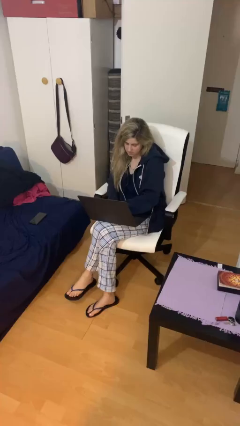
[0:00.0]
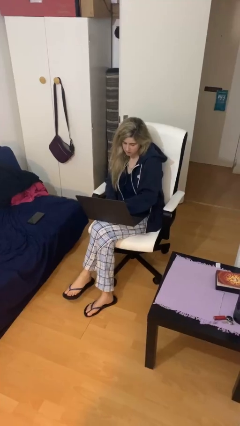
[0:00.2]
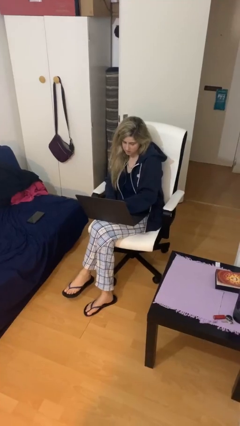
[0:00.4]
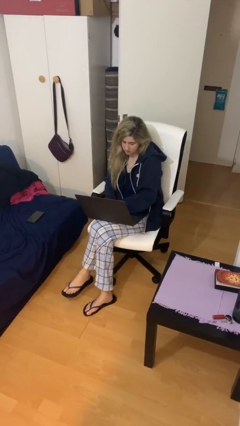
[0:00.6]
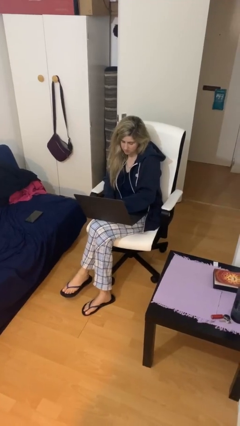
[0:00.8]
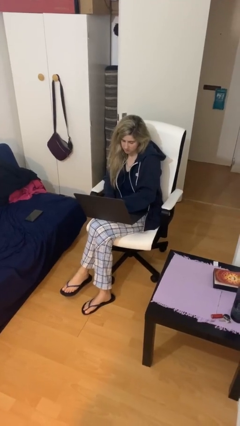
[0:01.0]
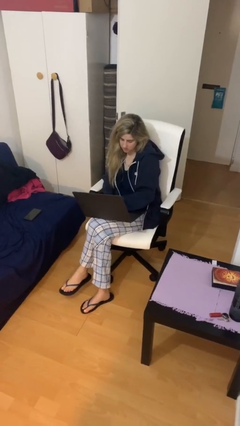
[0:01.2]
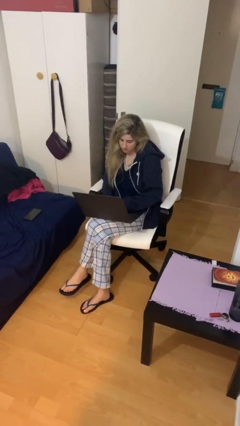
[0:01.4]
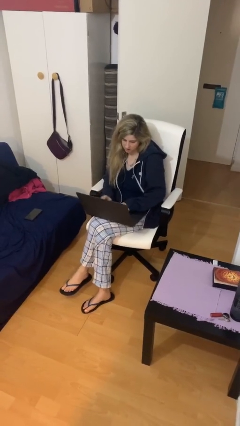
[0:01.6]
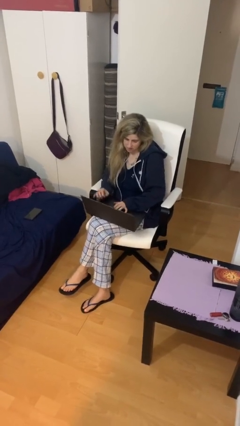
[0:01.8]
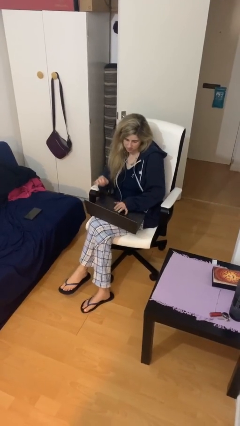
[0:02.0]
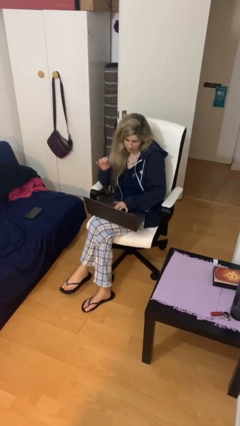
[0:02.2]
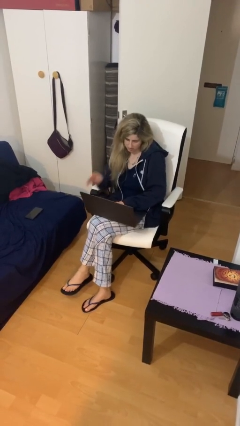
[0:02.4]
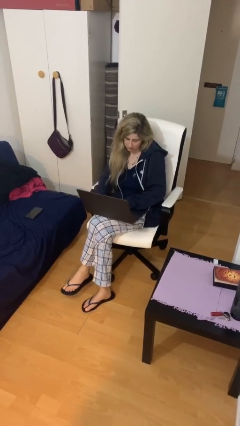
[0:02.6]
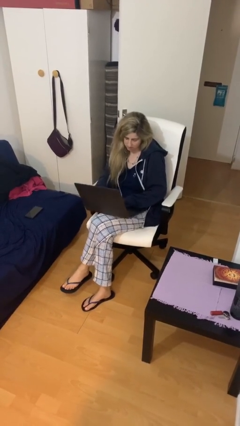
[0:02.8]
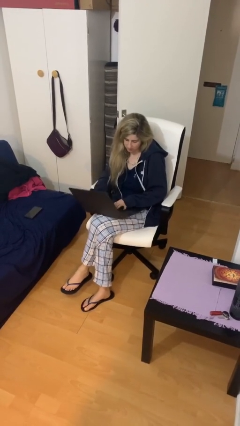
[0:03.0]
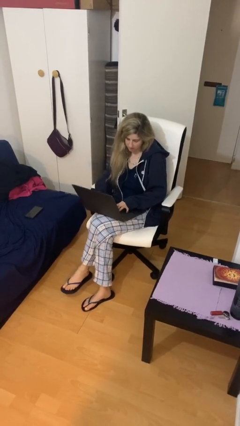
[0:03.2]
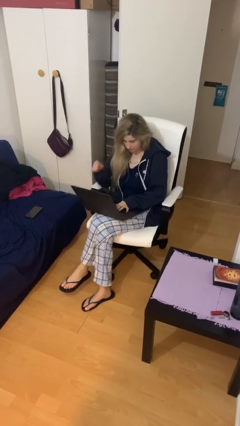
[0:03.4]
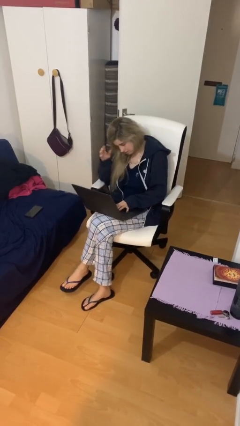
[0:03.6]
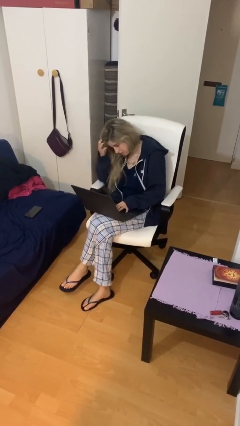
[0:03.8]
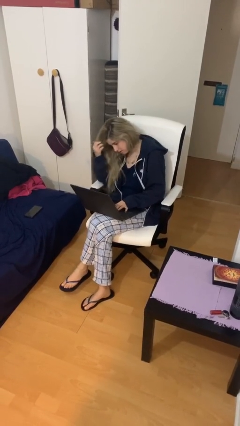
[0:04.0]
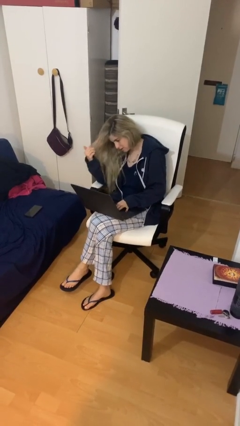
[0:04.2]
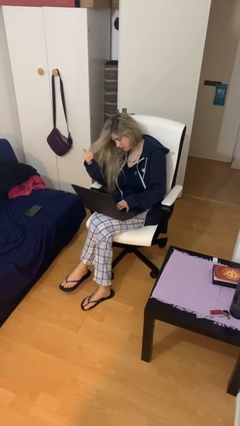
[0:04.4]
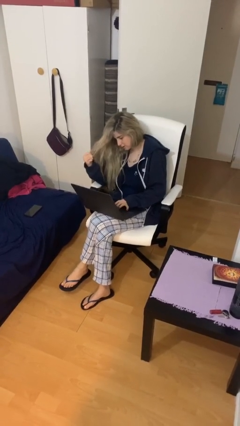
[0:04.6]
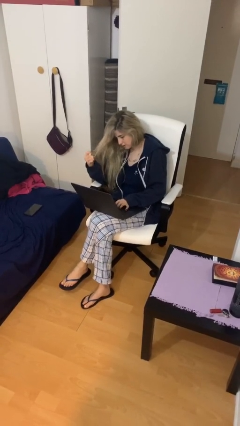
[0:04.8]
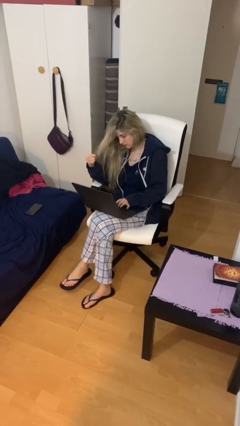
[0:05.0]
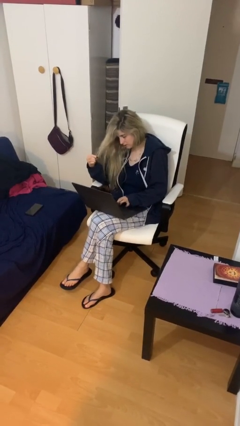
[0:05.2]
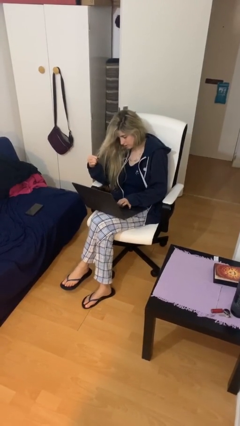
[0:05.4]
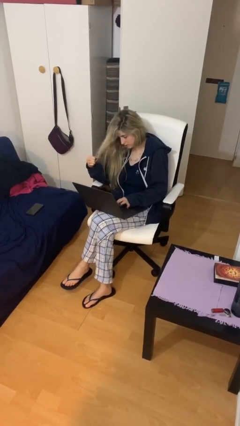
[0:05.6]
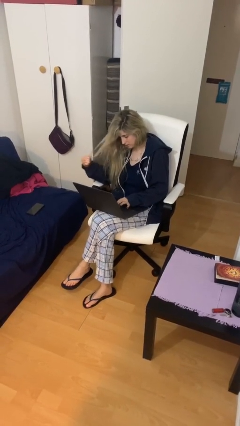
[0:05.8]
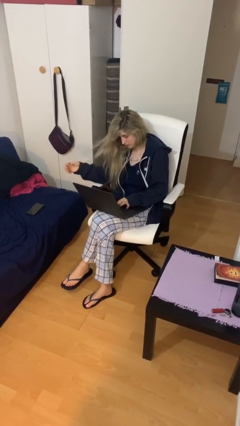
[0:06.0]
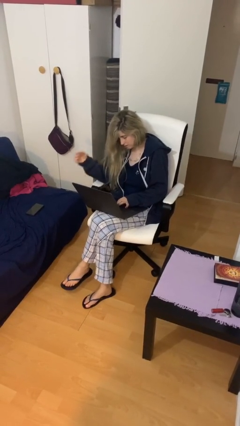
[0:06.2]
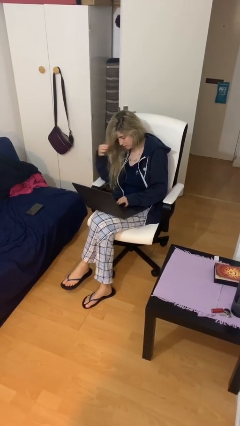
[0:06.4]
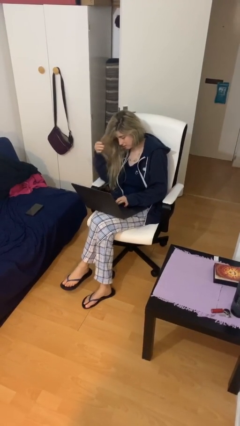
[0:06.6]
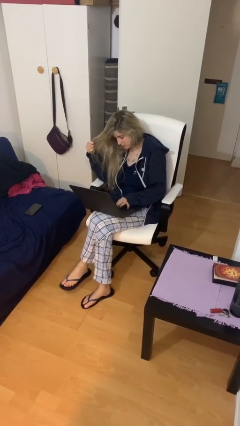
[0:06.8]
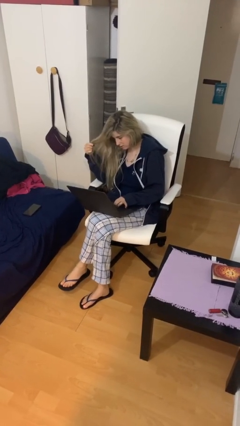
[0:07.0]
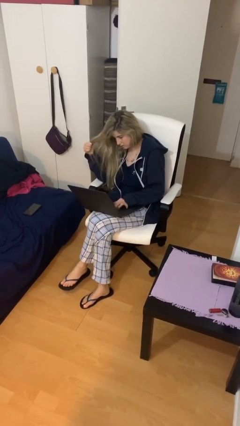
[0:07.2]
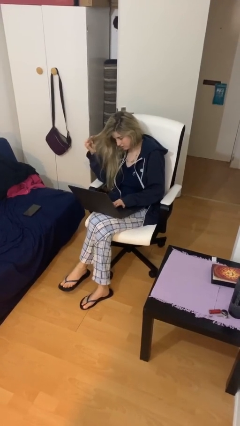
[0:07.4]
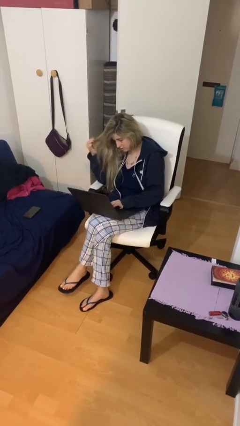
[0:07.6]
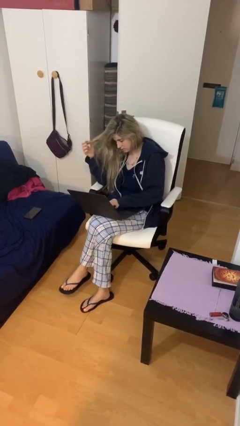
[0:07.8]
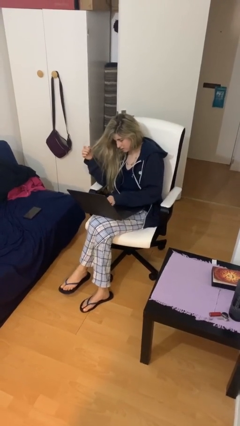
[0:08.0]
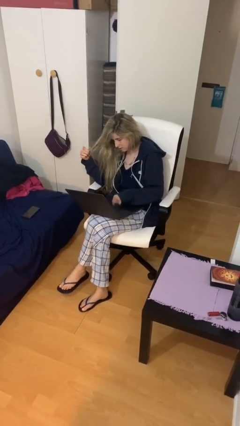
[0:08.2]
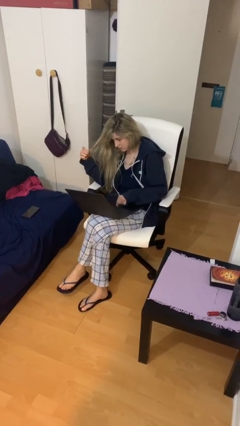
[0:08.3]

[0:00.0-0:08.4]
person interacts with laptop

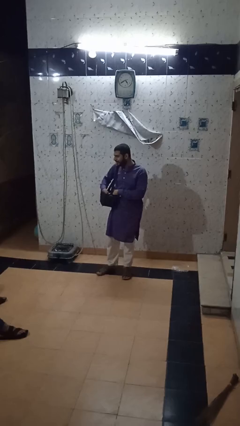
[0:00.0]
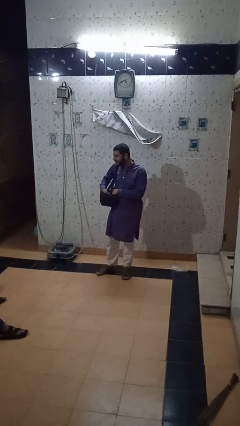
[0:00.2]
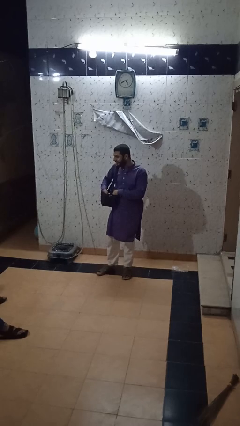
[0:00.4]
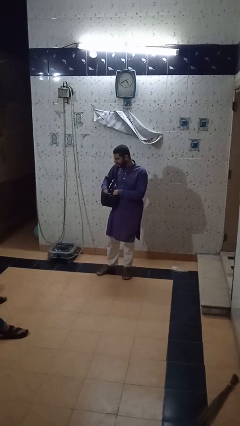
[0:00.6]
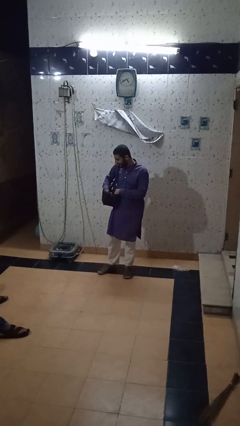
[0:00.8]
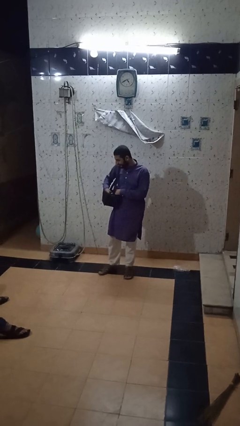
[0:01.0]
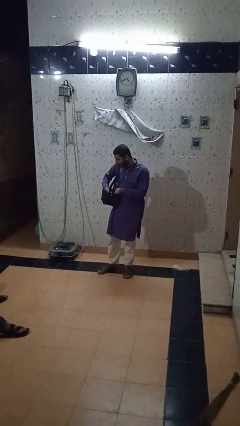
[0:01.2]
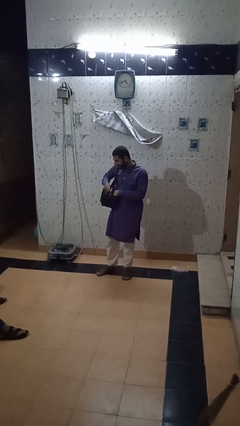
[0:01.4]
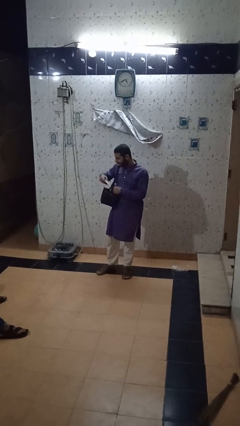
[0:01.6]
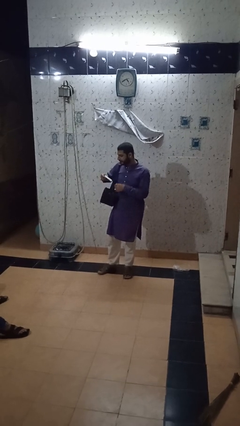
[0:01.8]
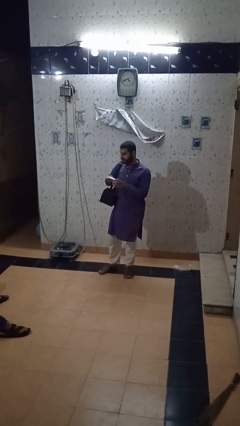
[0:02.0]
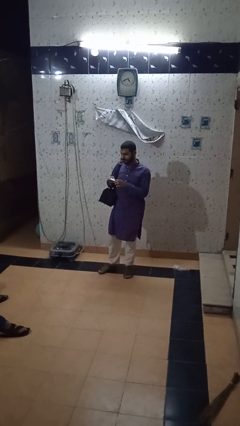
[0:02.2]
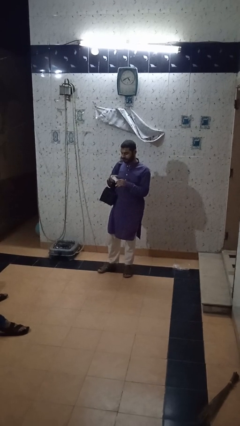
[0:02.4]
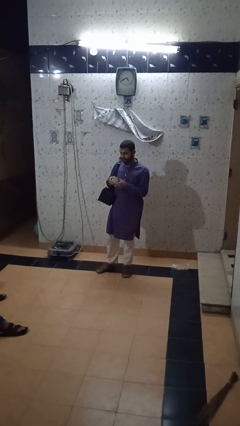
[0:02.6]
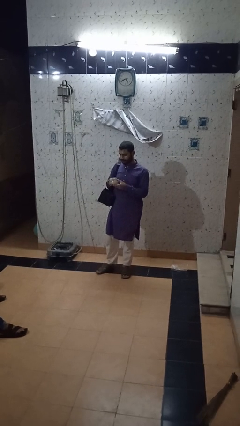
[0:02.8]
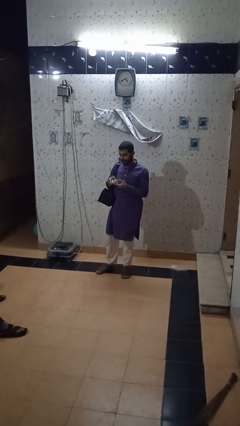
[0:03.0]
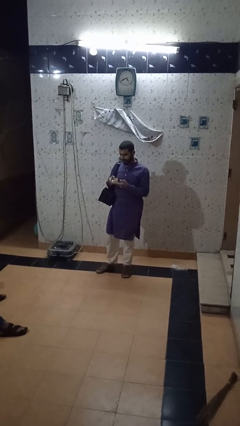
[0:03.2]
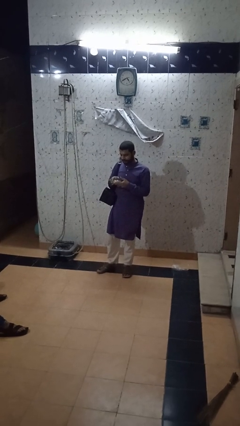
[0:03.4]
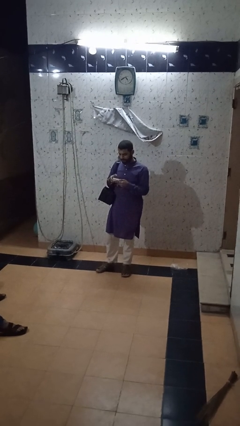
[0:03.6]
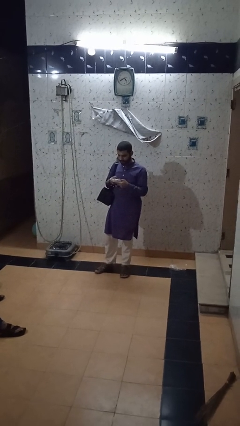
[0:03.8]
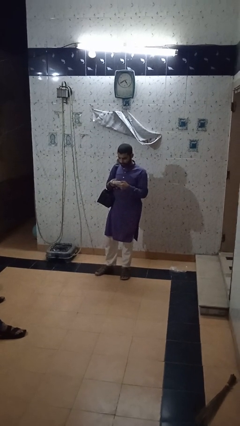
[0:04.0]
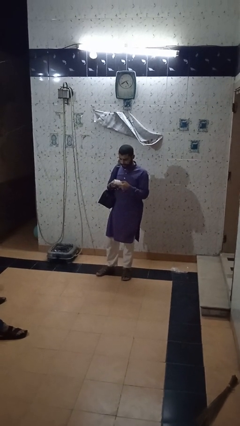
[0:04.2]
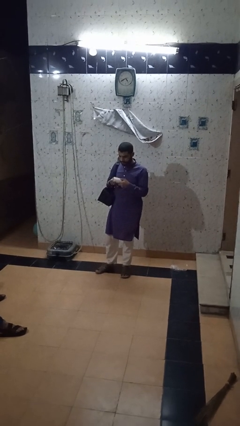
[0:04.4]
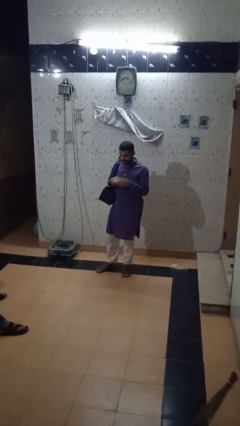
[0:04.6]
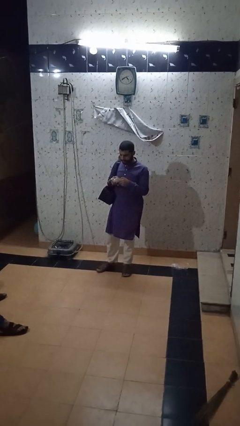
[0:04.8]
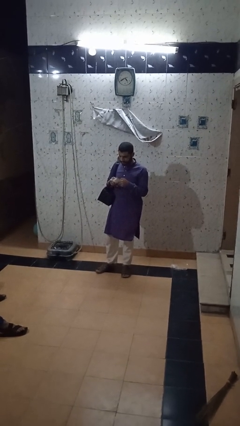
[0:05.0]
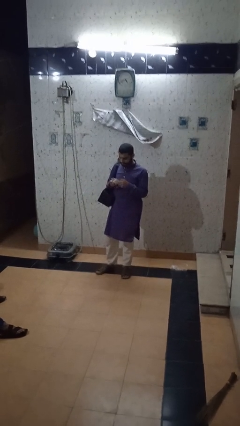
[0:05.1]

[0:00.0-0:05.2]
person takes object from backpack

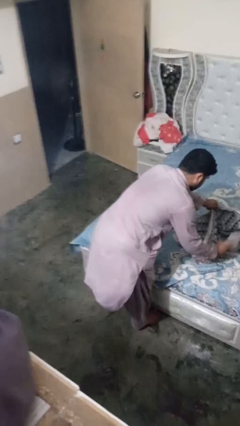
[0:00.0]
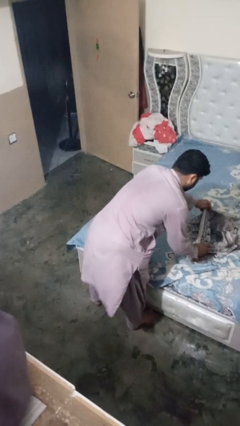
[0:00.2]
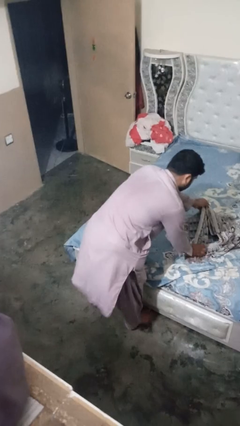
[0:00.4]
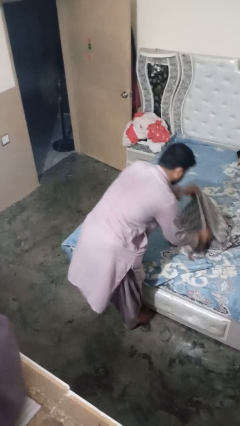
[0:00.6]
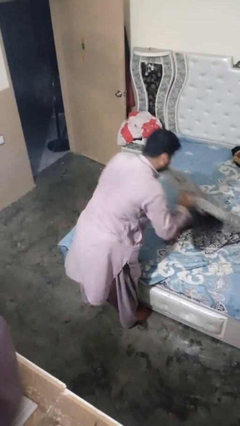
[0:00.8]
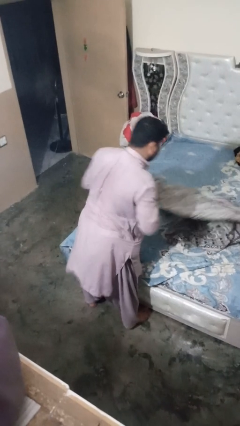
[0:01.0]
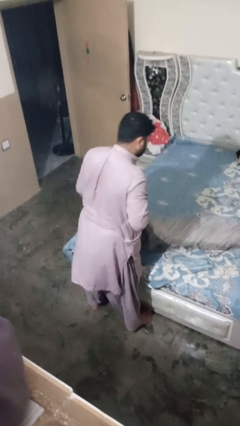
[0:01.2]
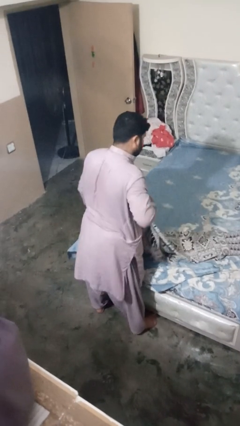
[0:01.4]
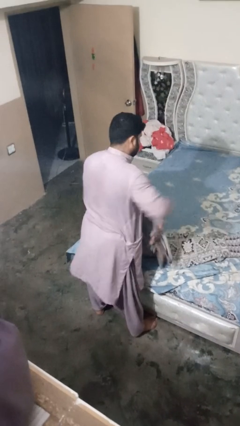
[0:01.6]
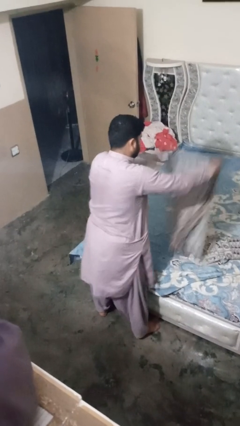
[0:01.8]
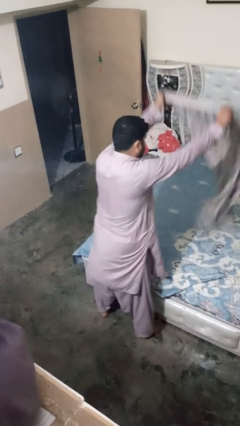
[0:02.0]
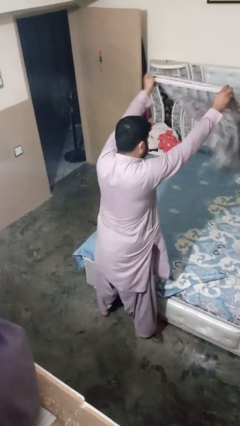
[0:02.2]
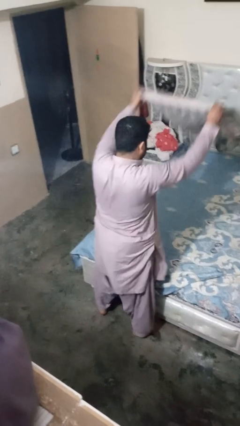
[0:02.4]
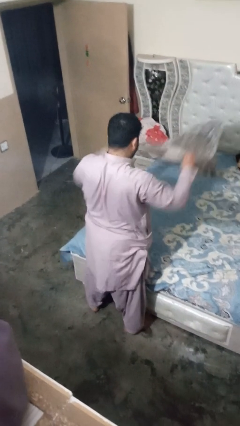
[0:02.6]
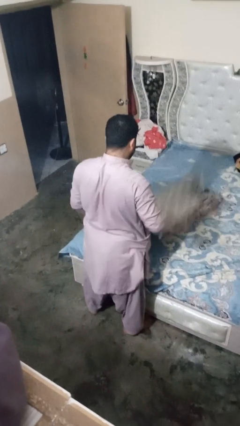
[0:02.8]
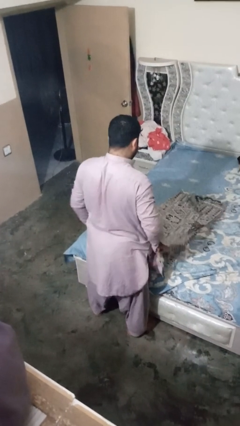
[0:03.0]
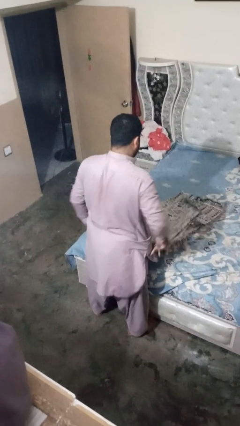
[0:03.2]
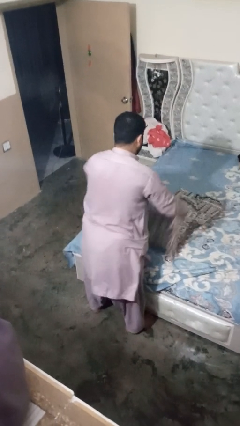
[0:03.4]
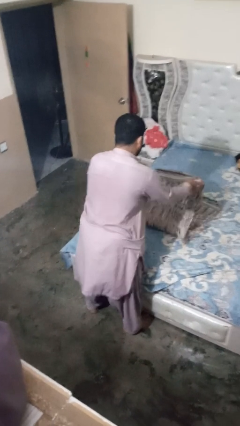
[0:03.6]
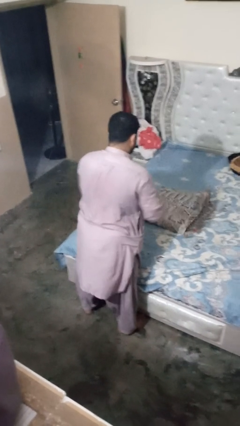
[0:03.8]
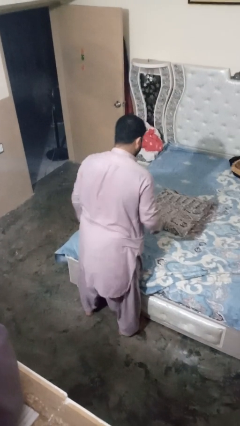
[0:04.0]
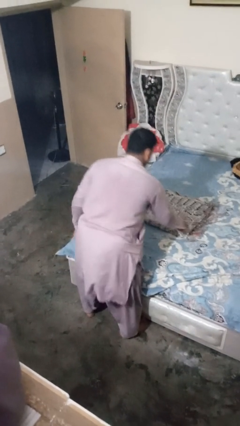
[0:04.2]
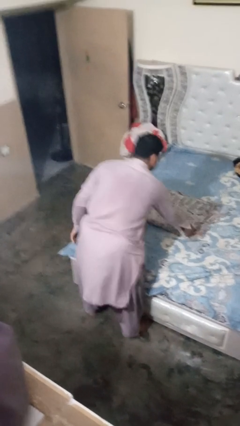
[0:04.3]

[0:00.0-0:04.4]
person folds blanket
